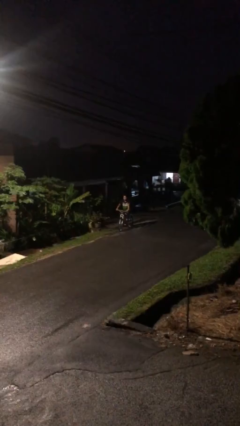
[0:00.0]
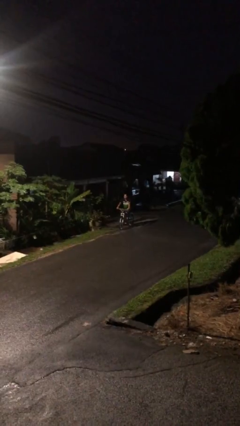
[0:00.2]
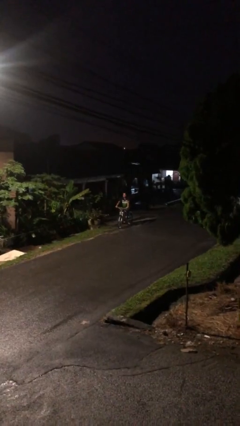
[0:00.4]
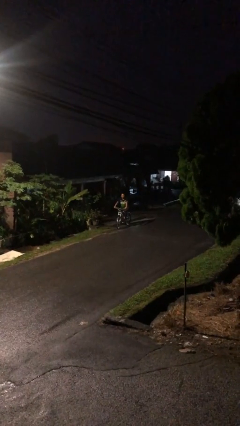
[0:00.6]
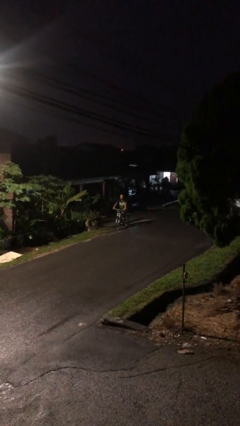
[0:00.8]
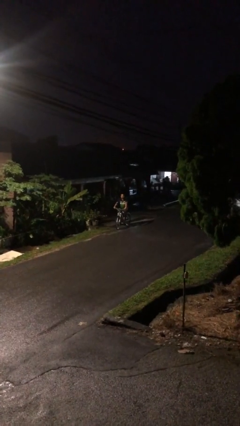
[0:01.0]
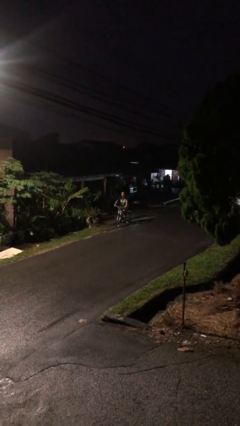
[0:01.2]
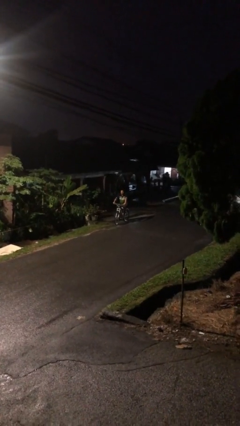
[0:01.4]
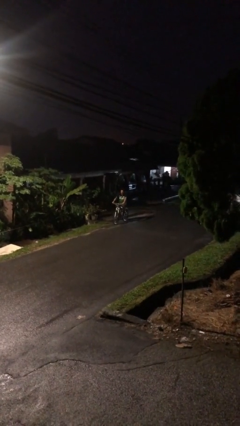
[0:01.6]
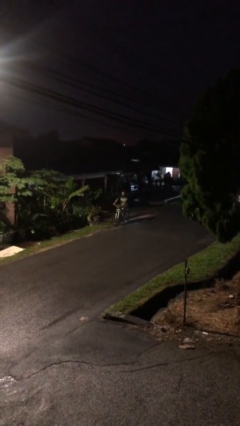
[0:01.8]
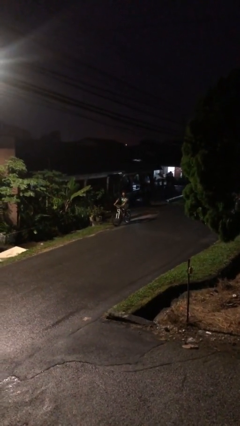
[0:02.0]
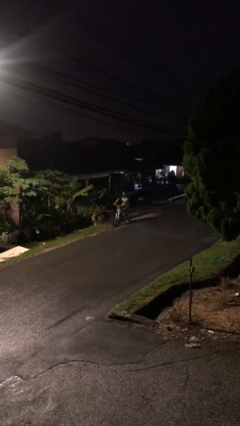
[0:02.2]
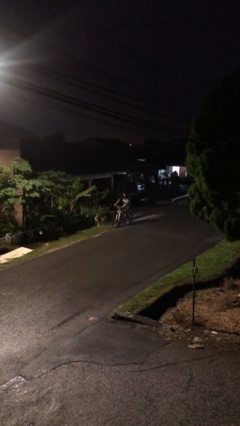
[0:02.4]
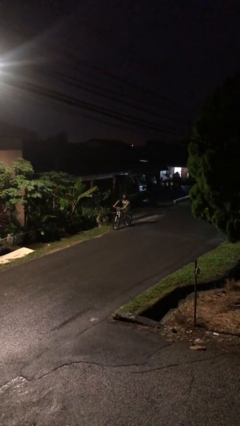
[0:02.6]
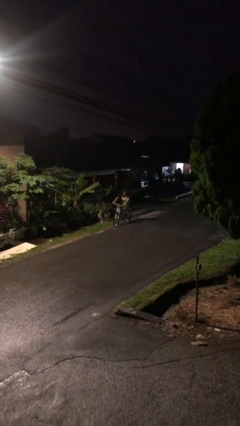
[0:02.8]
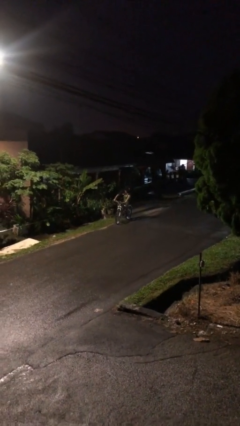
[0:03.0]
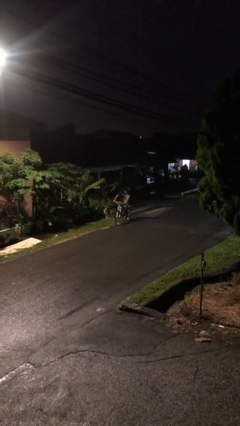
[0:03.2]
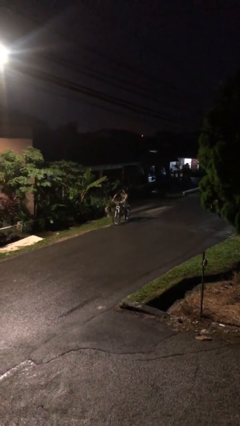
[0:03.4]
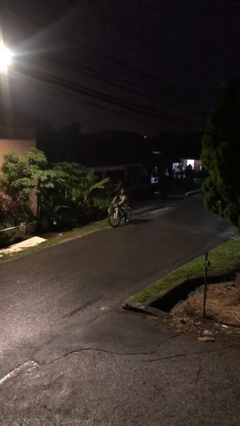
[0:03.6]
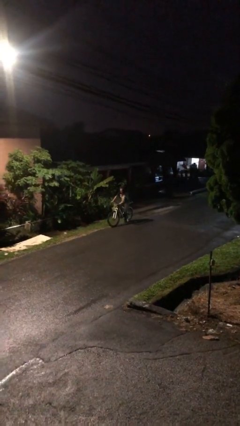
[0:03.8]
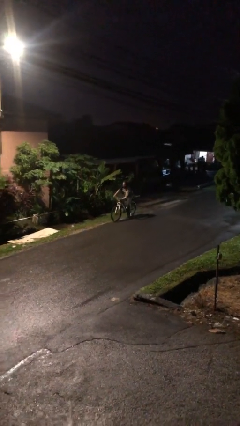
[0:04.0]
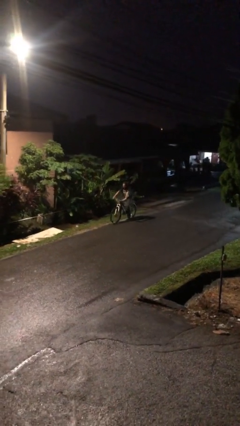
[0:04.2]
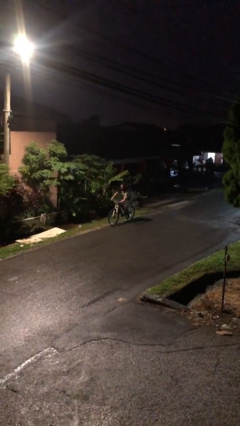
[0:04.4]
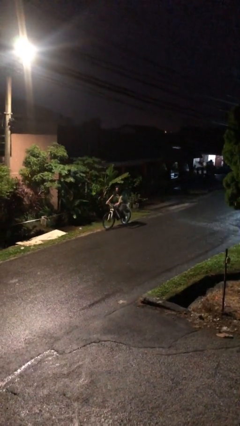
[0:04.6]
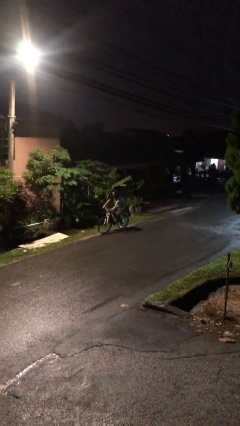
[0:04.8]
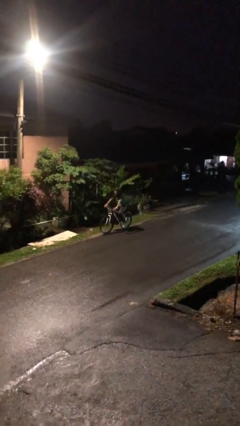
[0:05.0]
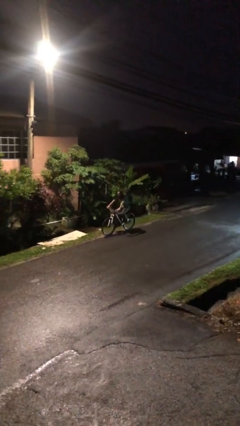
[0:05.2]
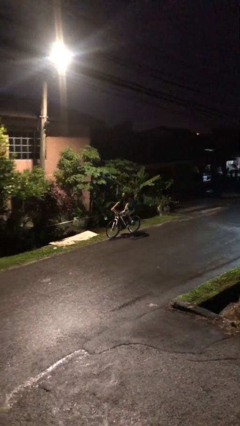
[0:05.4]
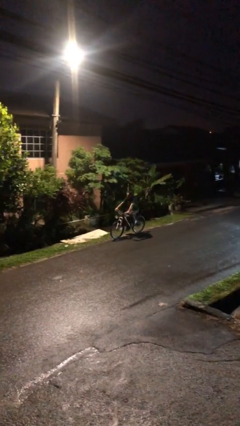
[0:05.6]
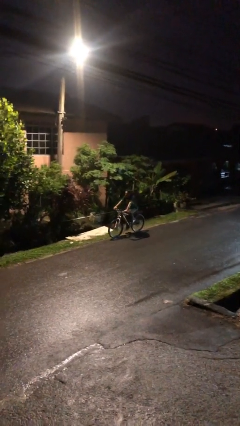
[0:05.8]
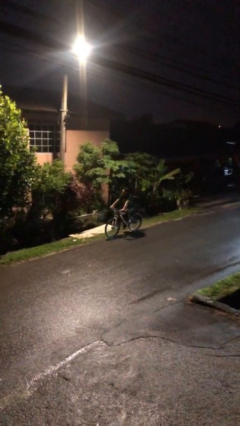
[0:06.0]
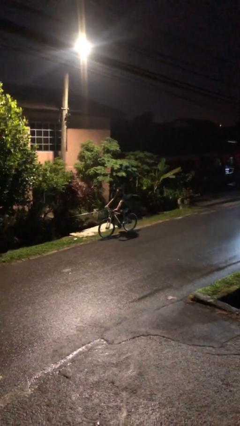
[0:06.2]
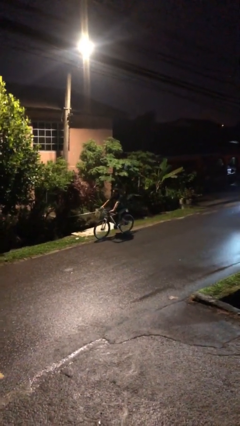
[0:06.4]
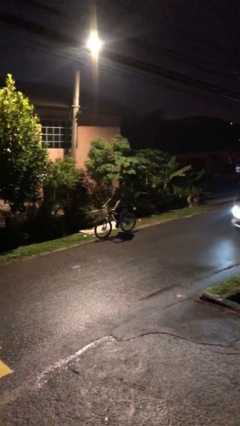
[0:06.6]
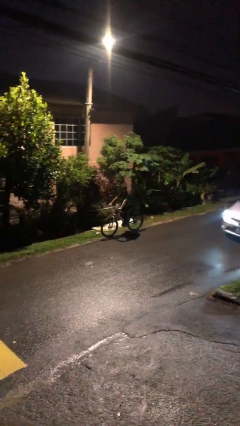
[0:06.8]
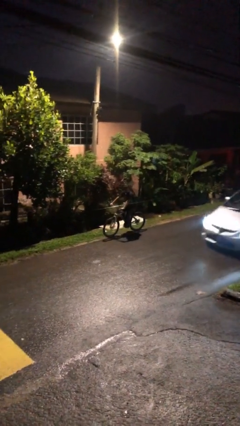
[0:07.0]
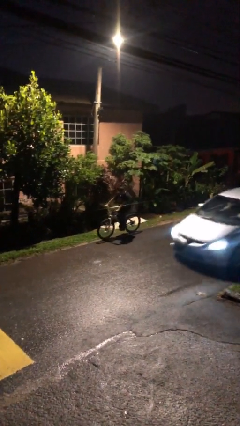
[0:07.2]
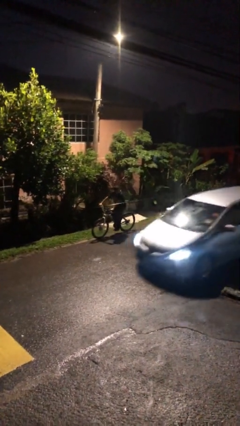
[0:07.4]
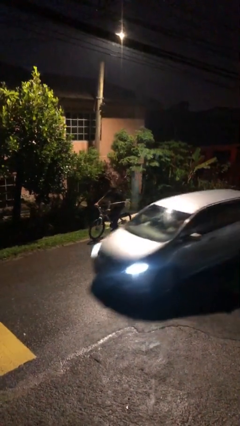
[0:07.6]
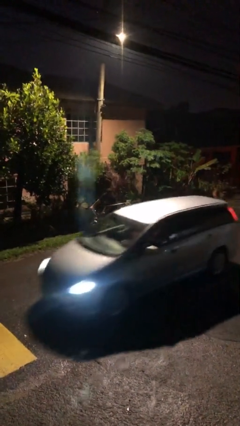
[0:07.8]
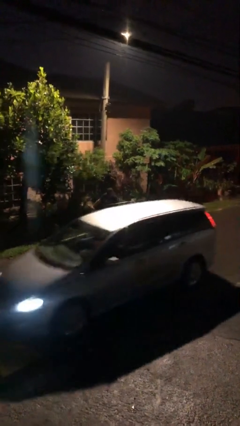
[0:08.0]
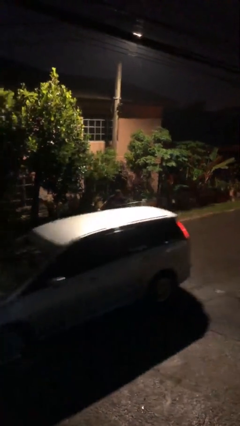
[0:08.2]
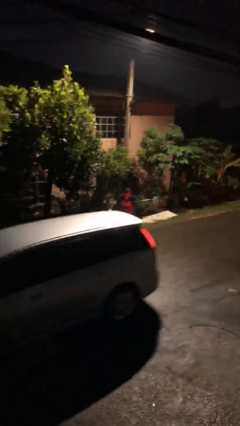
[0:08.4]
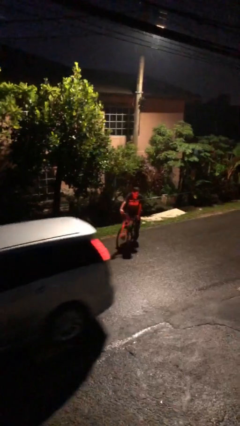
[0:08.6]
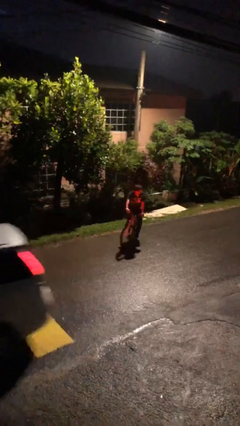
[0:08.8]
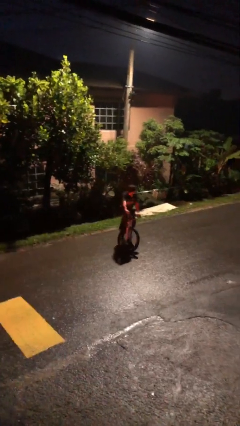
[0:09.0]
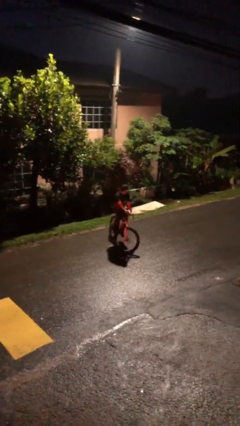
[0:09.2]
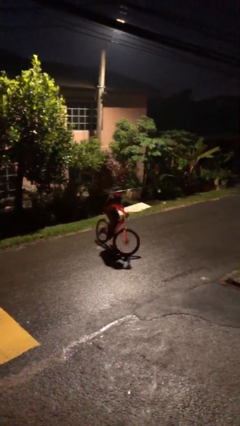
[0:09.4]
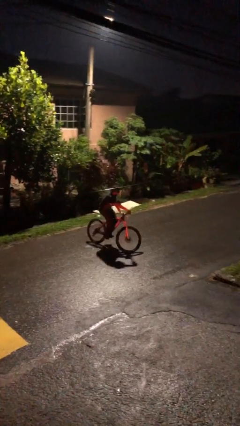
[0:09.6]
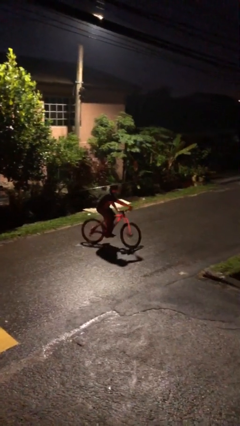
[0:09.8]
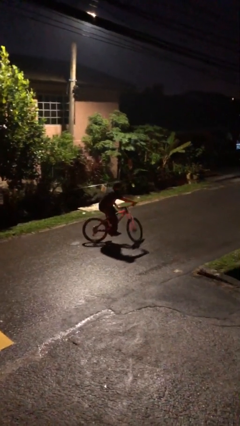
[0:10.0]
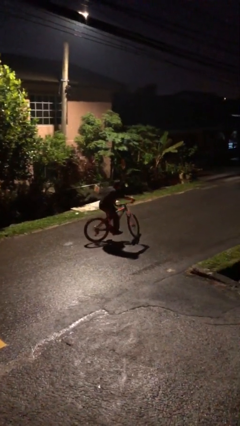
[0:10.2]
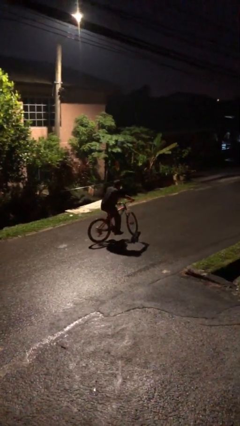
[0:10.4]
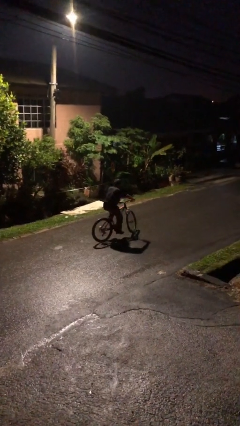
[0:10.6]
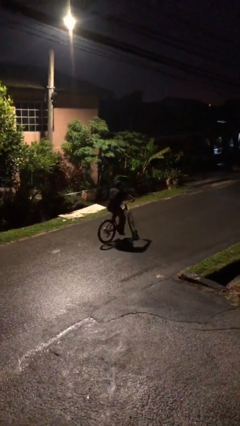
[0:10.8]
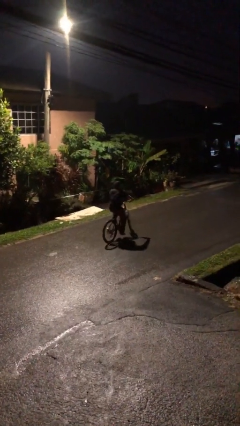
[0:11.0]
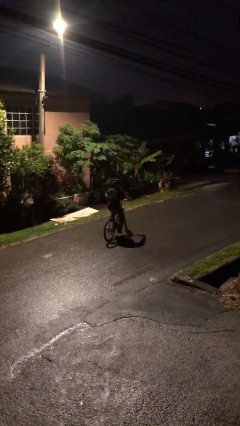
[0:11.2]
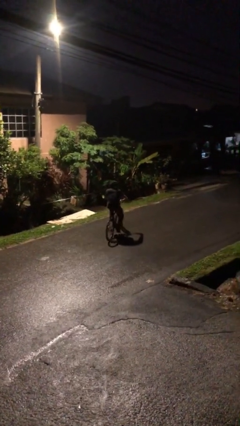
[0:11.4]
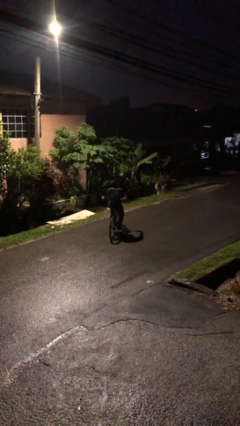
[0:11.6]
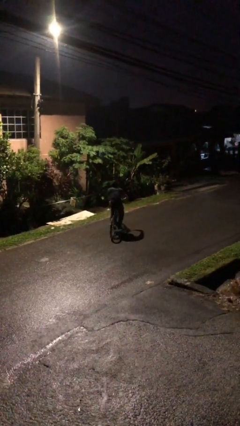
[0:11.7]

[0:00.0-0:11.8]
person rides bicycle

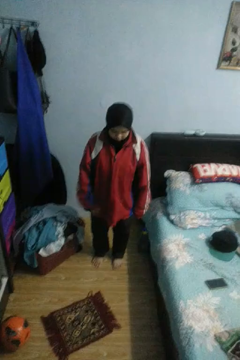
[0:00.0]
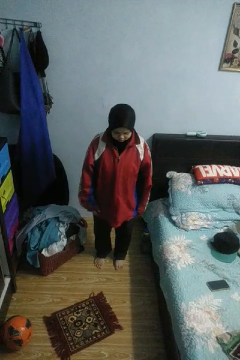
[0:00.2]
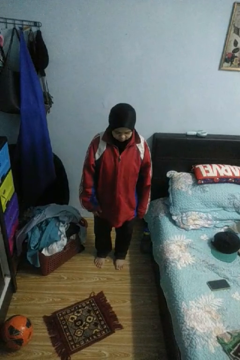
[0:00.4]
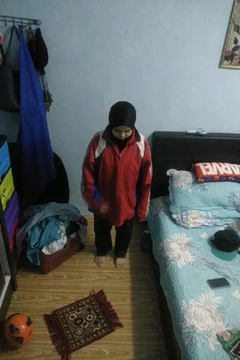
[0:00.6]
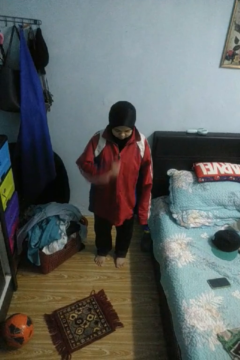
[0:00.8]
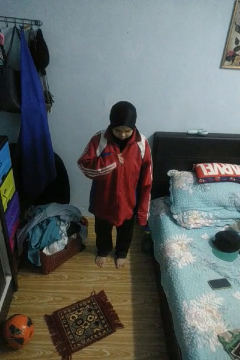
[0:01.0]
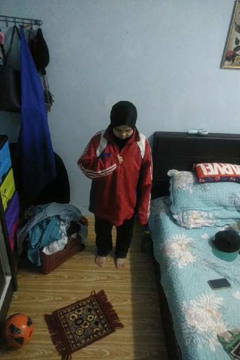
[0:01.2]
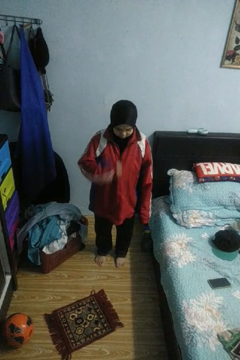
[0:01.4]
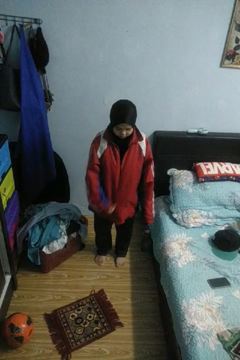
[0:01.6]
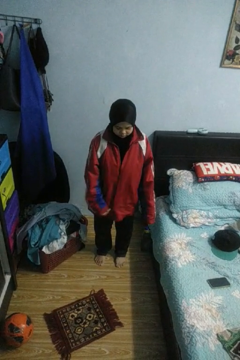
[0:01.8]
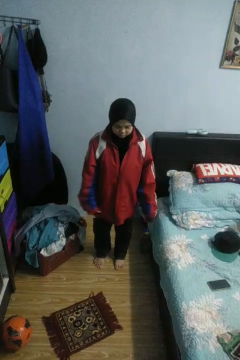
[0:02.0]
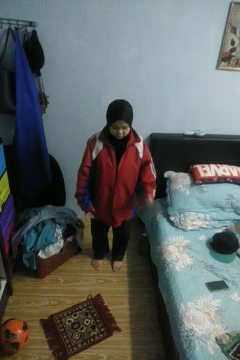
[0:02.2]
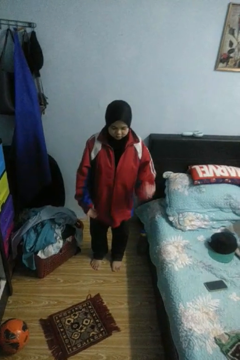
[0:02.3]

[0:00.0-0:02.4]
person unzips jacket

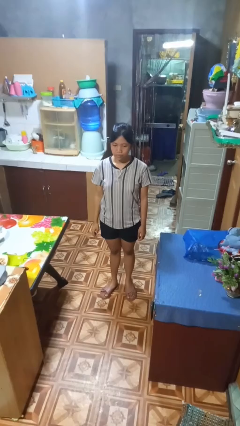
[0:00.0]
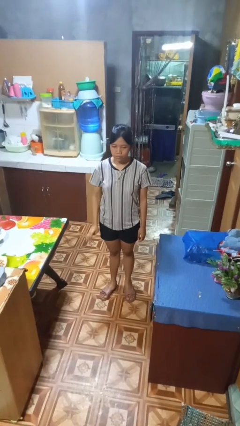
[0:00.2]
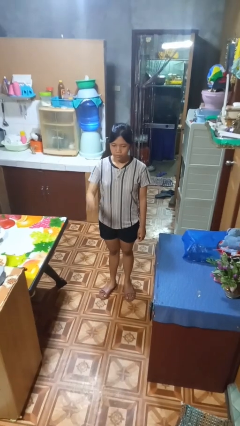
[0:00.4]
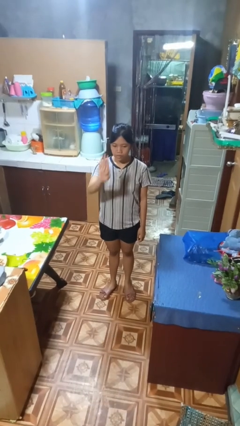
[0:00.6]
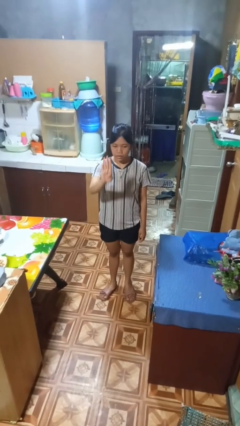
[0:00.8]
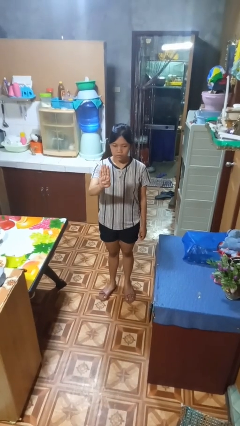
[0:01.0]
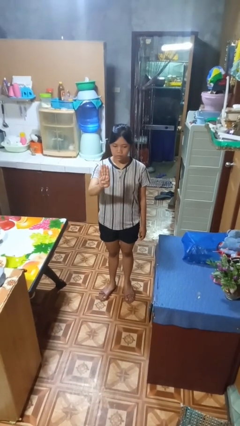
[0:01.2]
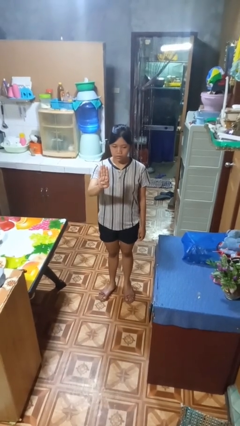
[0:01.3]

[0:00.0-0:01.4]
person gestures number four

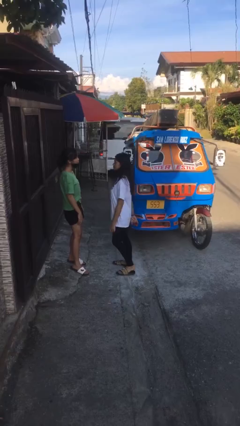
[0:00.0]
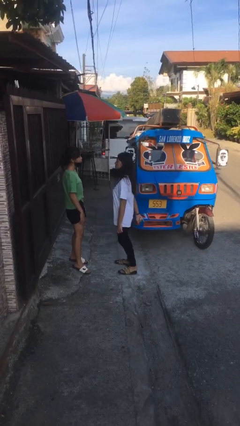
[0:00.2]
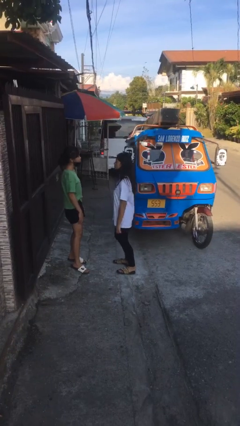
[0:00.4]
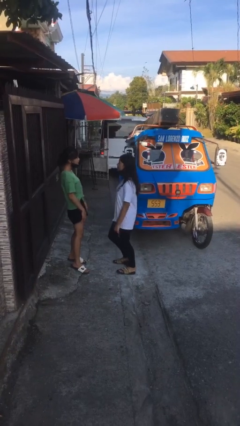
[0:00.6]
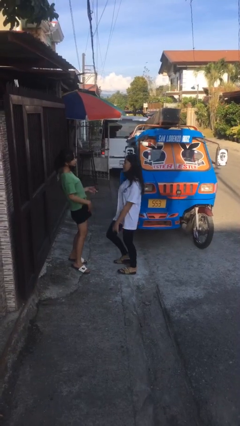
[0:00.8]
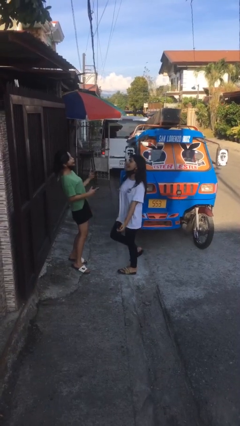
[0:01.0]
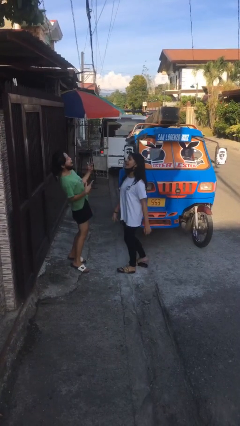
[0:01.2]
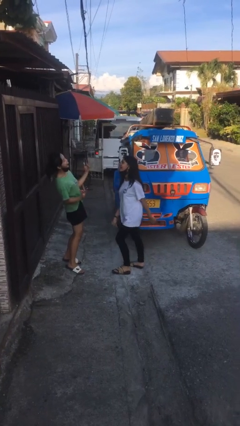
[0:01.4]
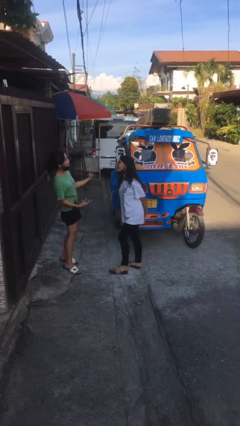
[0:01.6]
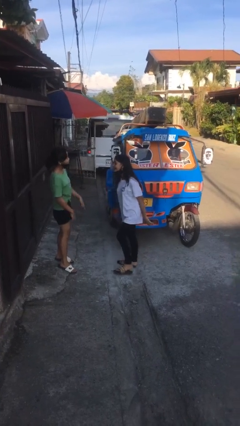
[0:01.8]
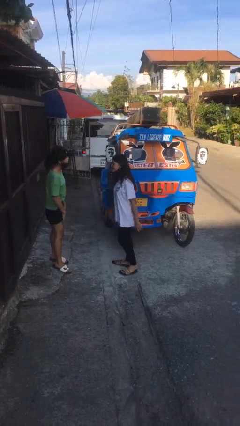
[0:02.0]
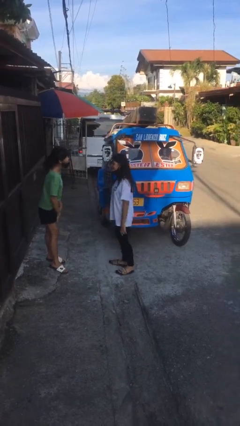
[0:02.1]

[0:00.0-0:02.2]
person laughs with person
